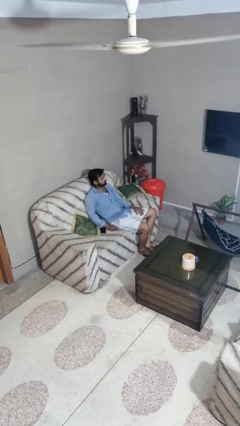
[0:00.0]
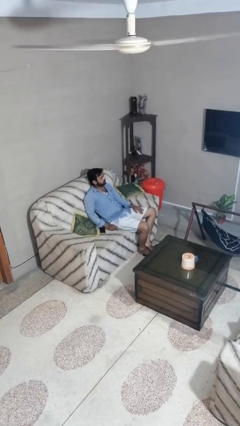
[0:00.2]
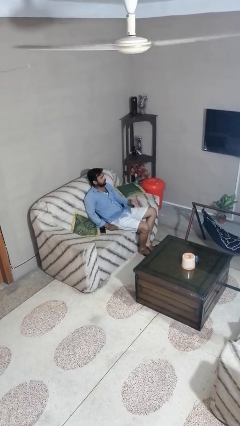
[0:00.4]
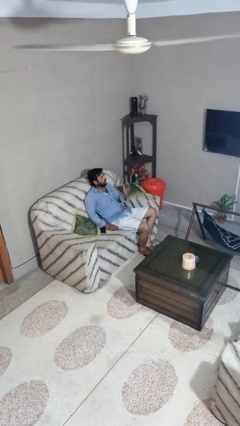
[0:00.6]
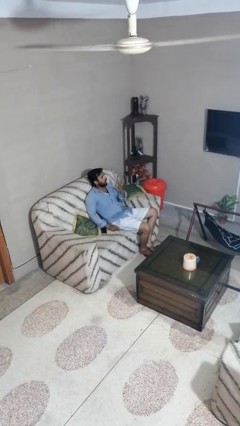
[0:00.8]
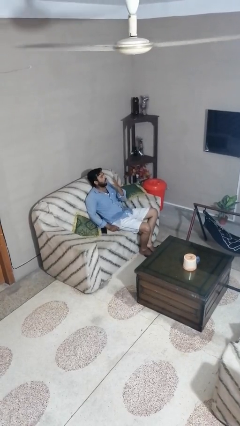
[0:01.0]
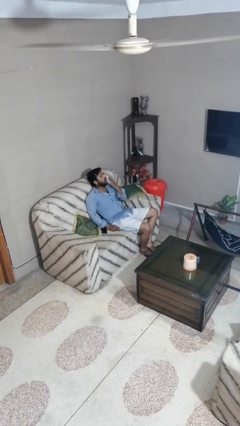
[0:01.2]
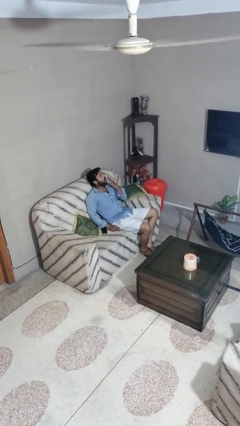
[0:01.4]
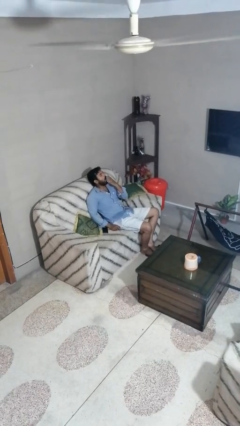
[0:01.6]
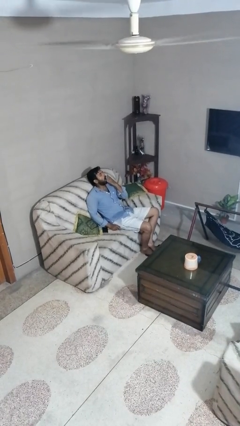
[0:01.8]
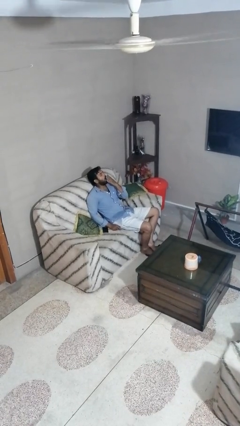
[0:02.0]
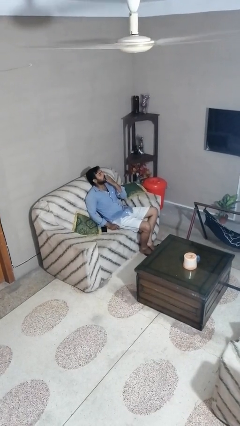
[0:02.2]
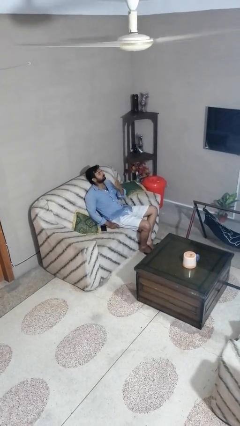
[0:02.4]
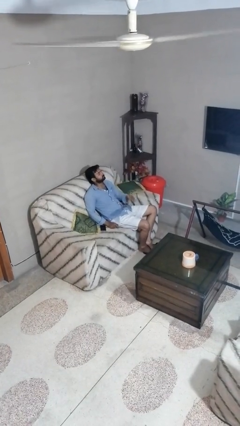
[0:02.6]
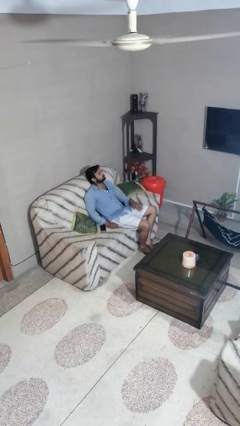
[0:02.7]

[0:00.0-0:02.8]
person yawns

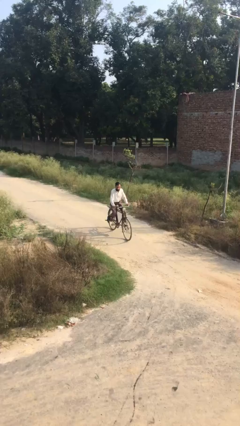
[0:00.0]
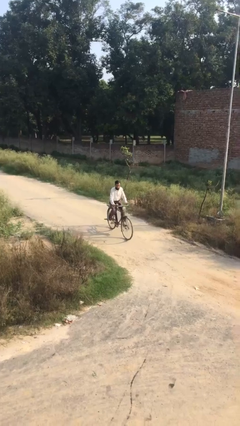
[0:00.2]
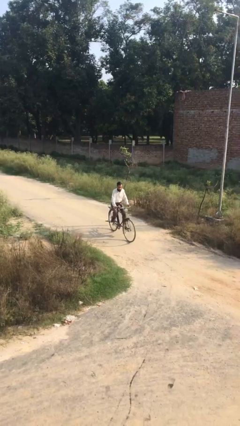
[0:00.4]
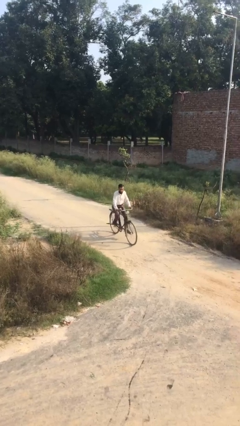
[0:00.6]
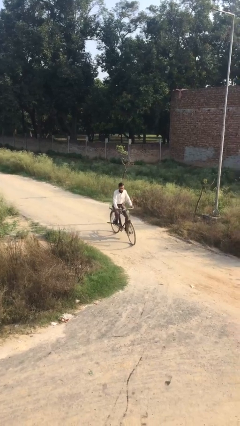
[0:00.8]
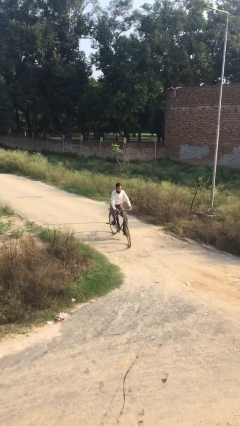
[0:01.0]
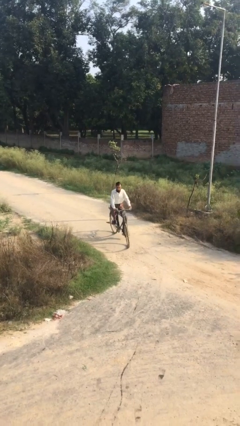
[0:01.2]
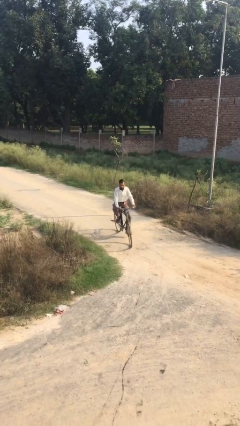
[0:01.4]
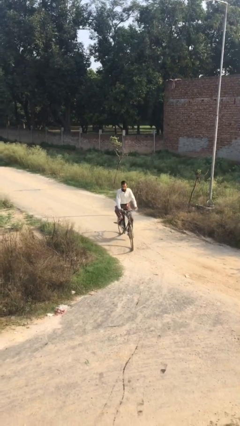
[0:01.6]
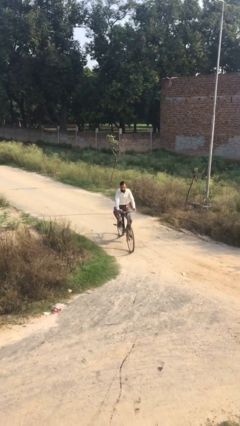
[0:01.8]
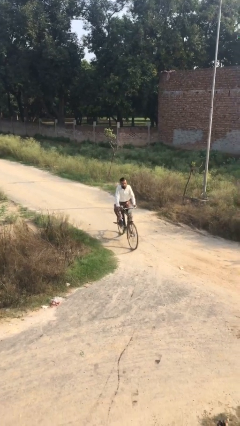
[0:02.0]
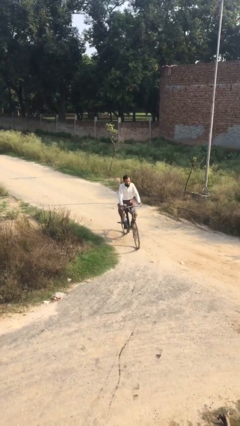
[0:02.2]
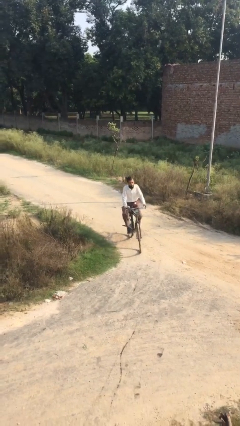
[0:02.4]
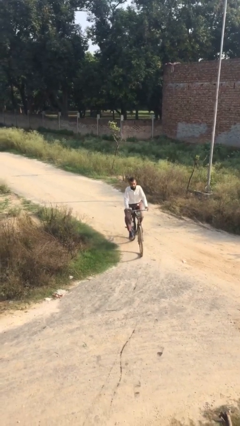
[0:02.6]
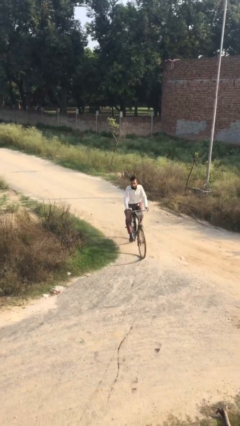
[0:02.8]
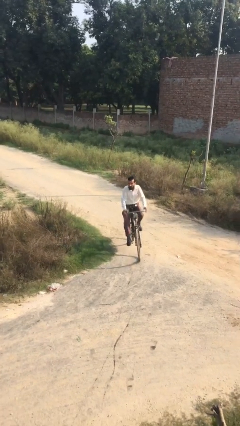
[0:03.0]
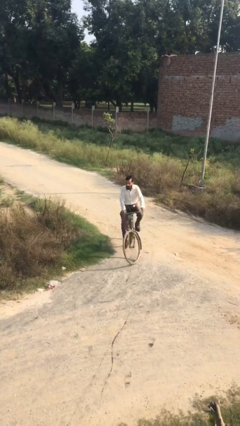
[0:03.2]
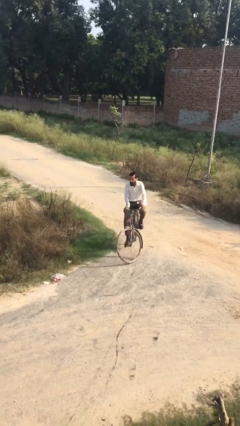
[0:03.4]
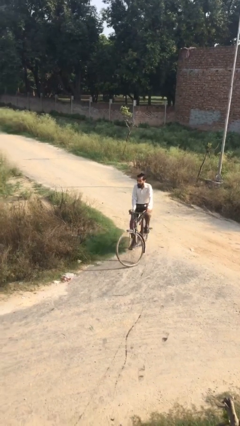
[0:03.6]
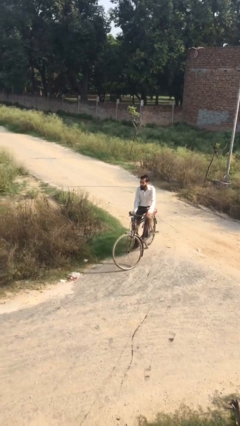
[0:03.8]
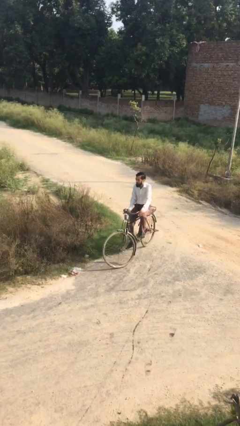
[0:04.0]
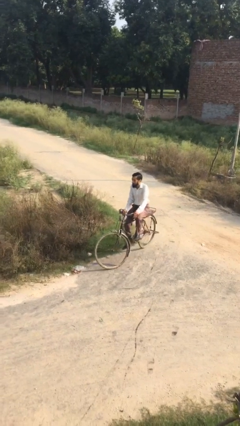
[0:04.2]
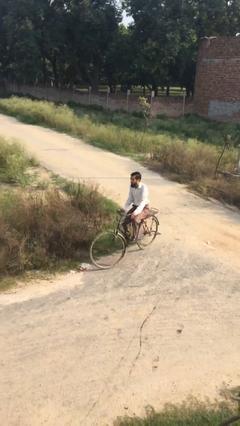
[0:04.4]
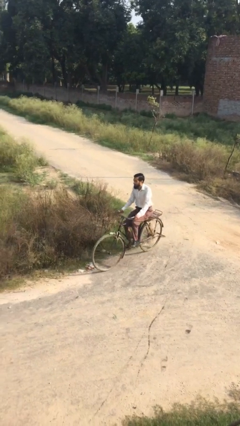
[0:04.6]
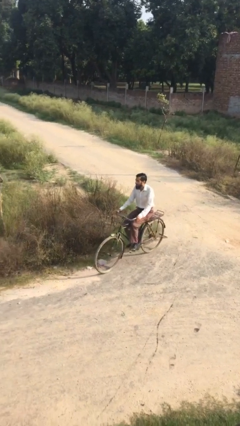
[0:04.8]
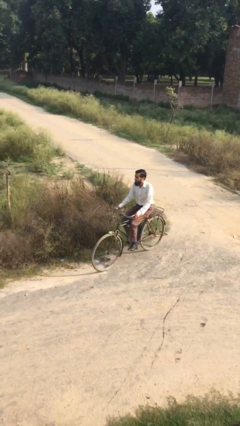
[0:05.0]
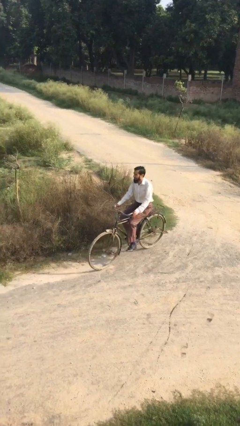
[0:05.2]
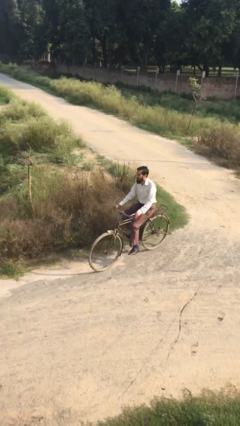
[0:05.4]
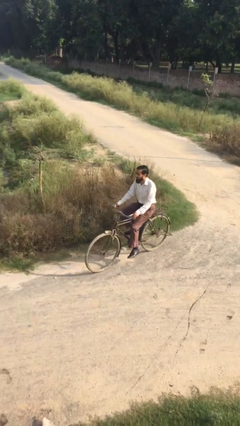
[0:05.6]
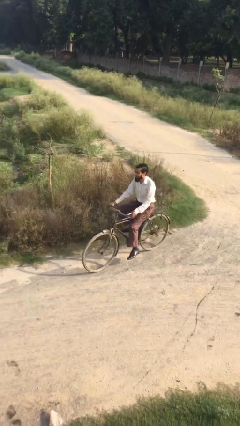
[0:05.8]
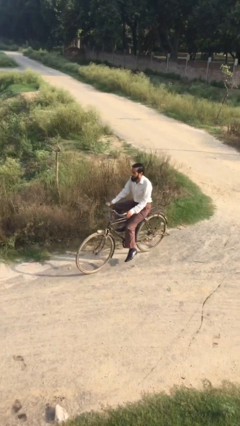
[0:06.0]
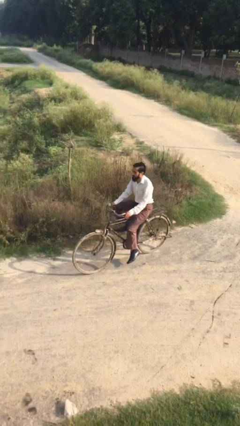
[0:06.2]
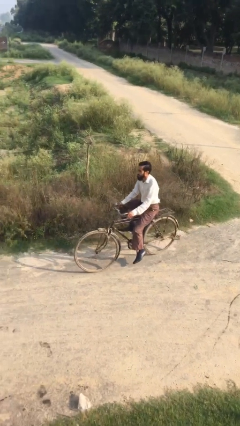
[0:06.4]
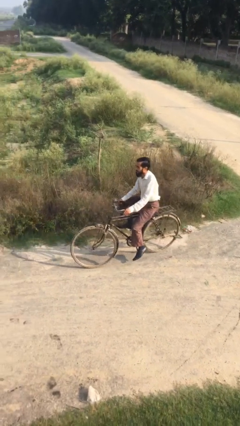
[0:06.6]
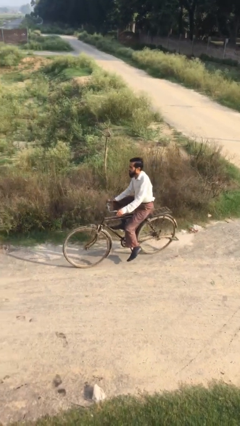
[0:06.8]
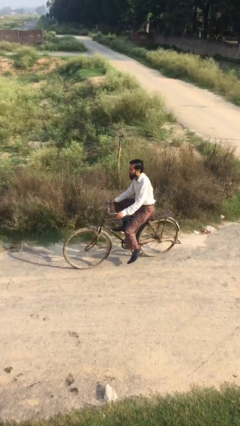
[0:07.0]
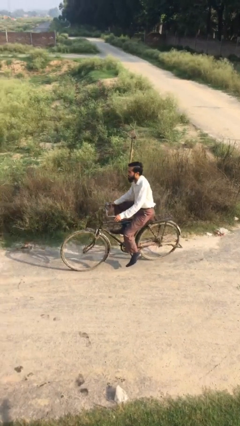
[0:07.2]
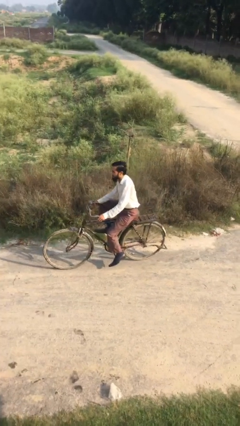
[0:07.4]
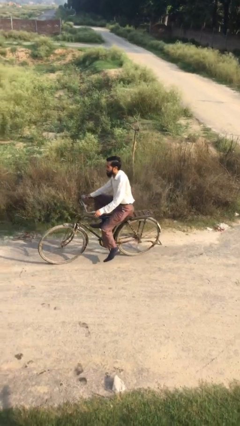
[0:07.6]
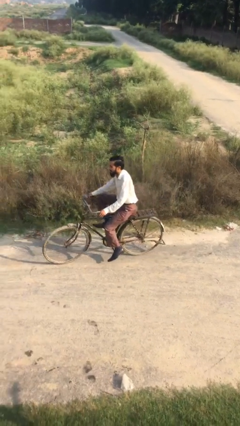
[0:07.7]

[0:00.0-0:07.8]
person rides bicycle

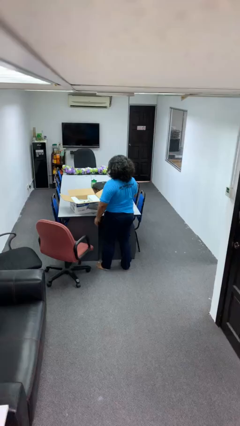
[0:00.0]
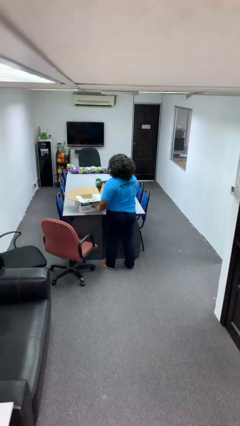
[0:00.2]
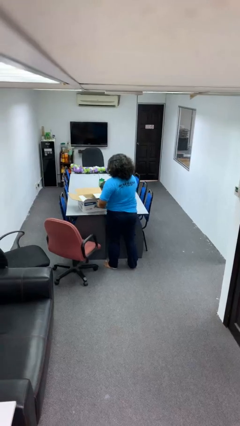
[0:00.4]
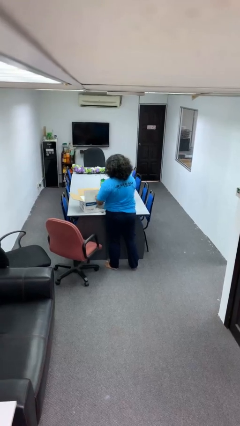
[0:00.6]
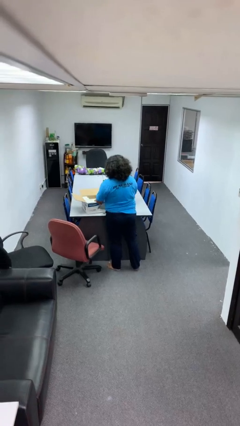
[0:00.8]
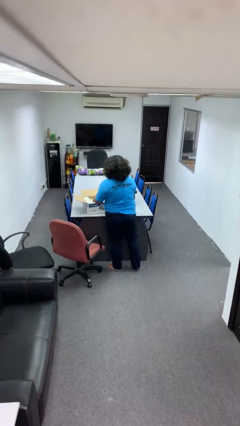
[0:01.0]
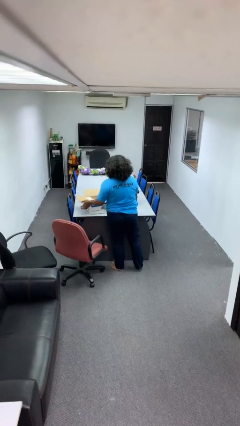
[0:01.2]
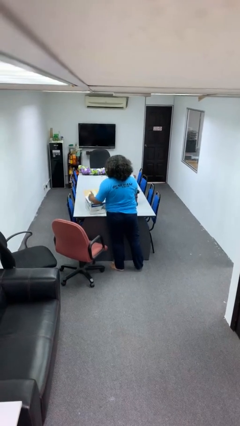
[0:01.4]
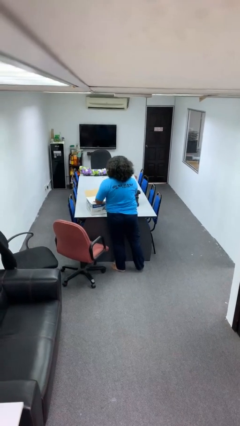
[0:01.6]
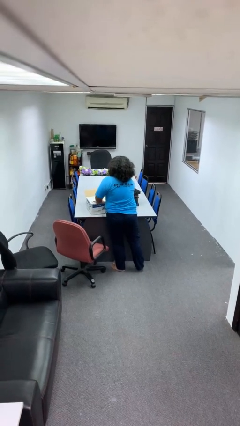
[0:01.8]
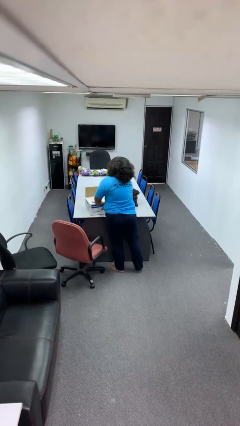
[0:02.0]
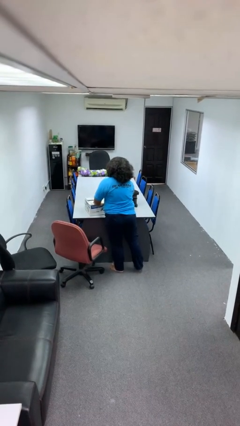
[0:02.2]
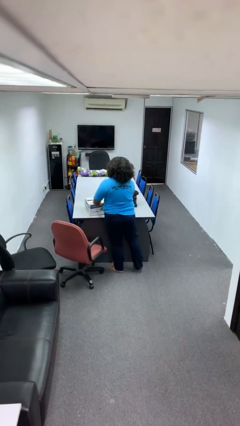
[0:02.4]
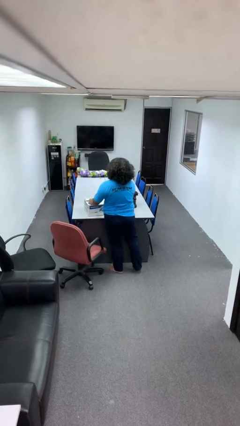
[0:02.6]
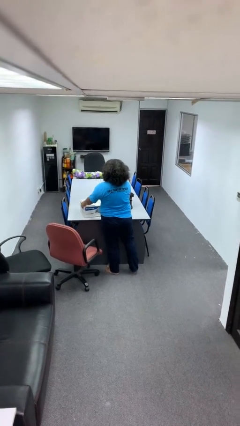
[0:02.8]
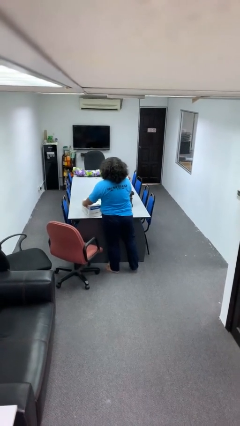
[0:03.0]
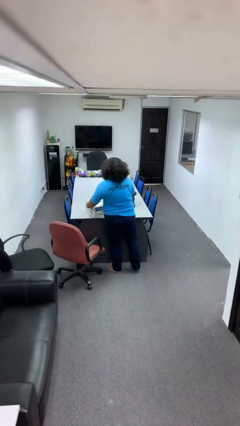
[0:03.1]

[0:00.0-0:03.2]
person closes box

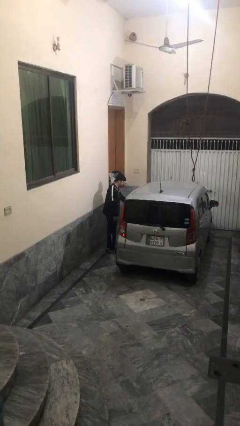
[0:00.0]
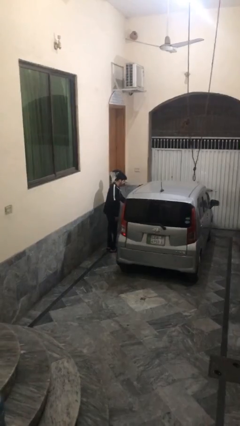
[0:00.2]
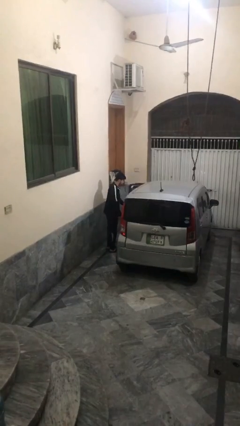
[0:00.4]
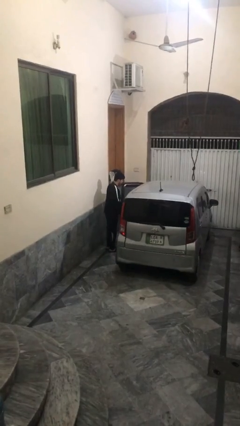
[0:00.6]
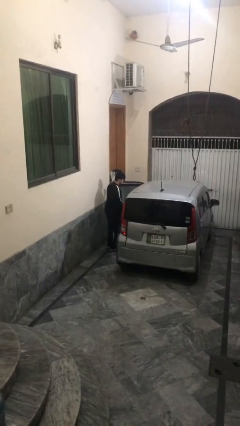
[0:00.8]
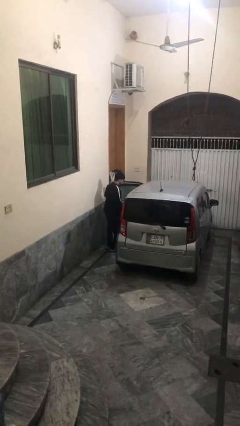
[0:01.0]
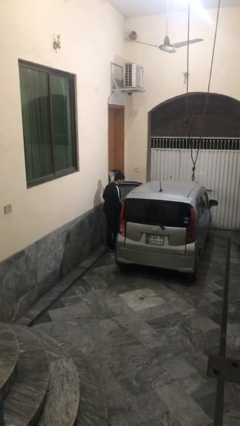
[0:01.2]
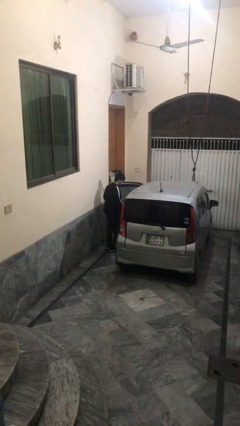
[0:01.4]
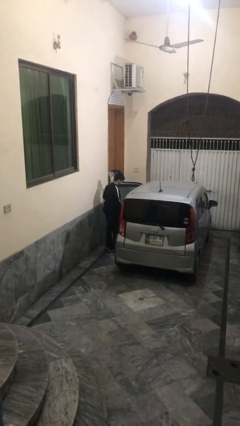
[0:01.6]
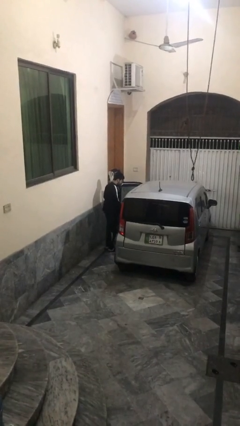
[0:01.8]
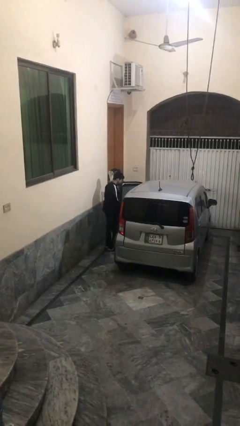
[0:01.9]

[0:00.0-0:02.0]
person opens car door

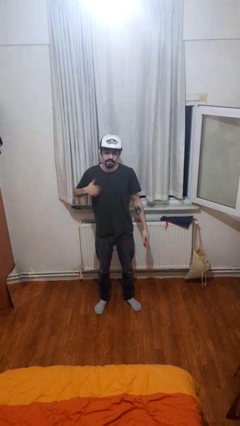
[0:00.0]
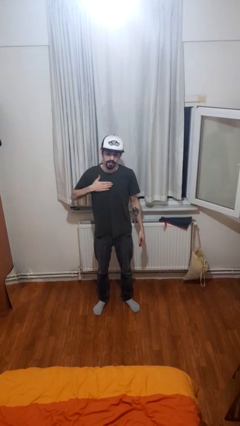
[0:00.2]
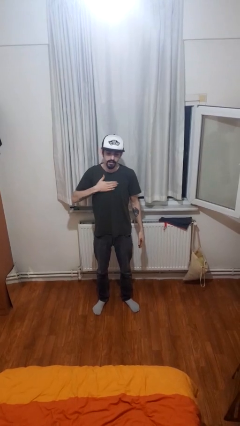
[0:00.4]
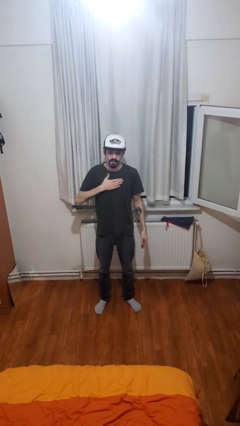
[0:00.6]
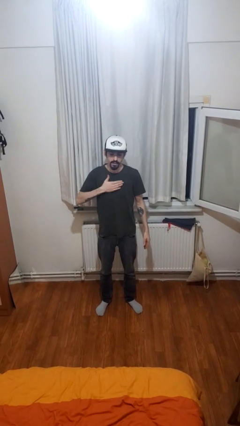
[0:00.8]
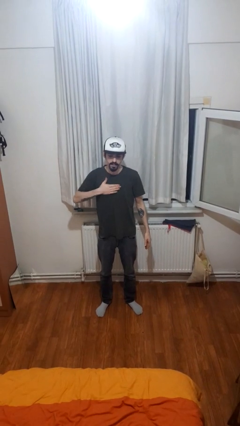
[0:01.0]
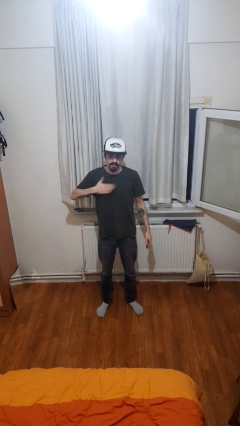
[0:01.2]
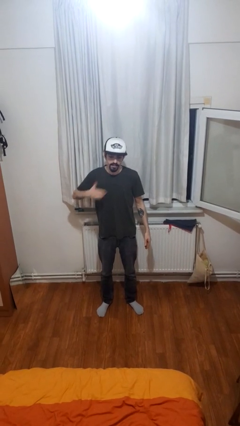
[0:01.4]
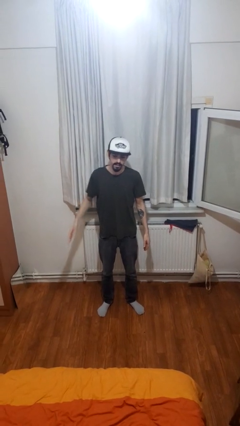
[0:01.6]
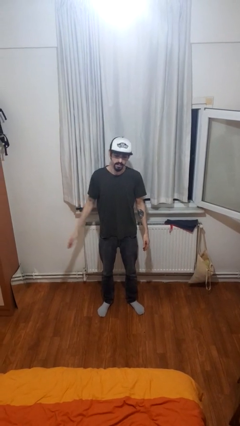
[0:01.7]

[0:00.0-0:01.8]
person drums on chest

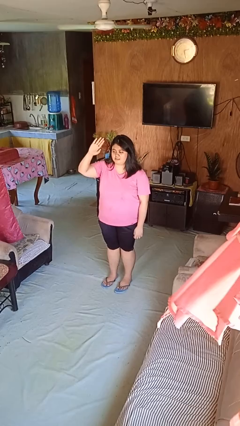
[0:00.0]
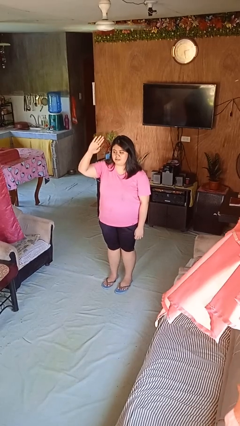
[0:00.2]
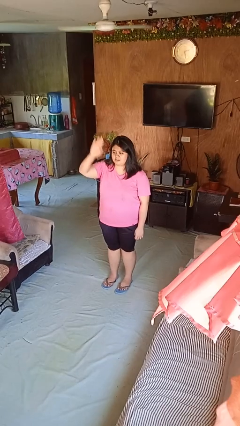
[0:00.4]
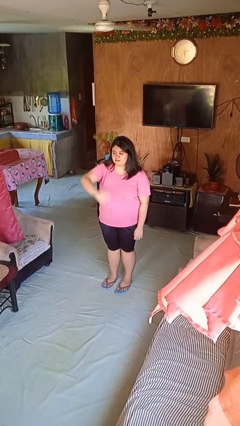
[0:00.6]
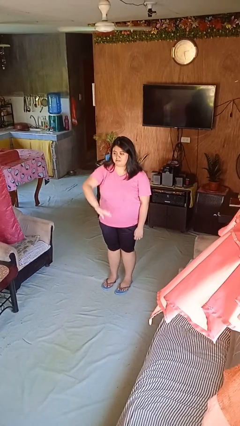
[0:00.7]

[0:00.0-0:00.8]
person gestures swipe down
